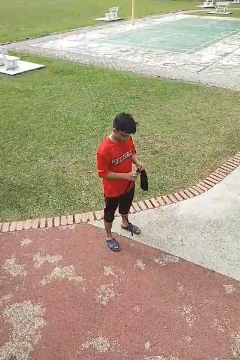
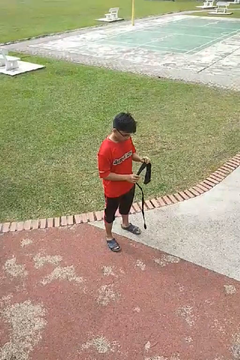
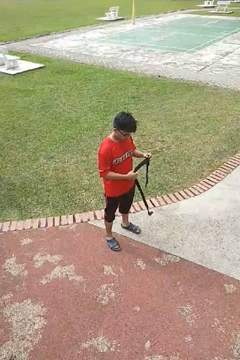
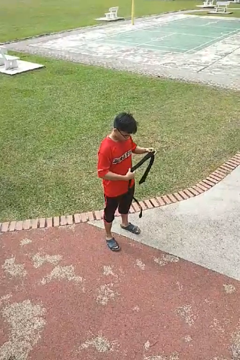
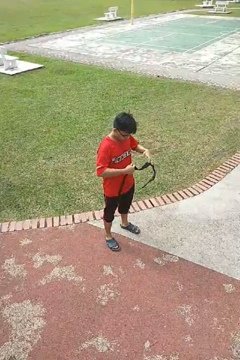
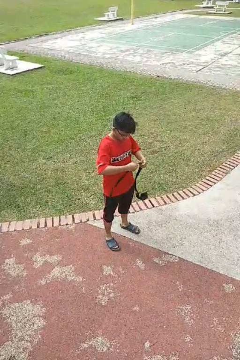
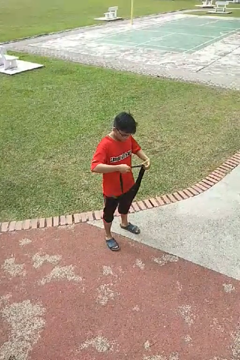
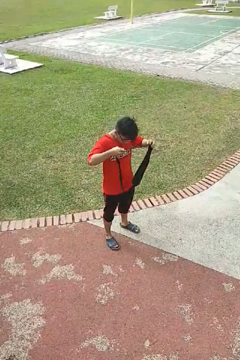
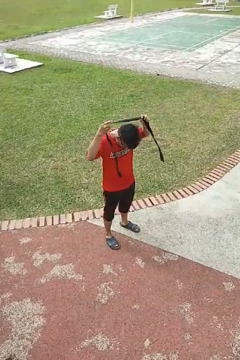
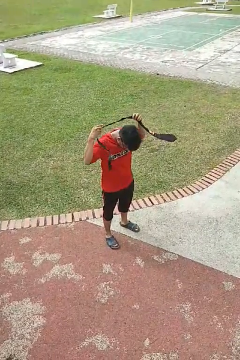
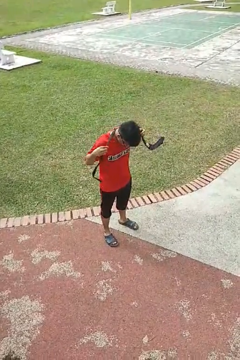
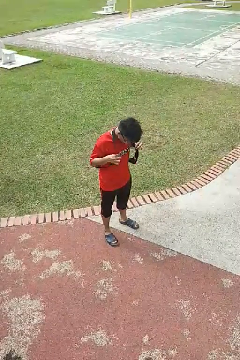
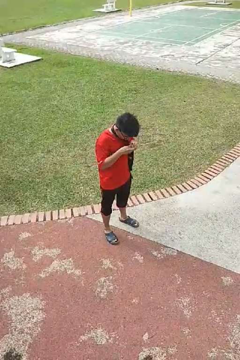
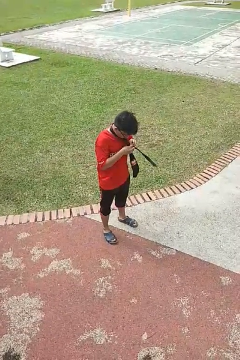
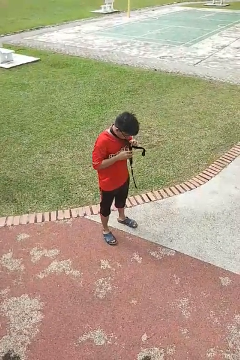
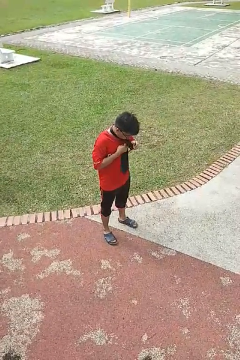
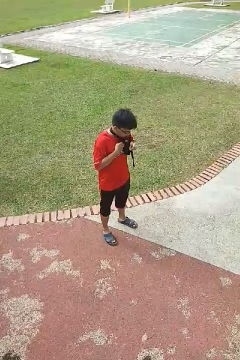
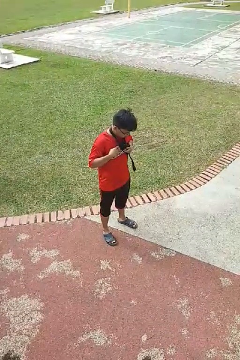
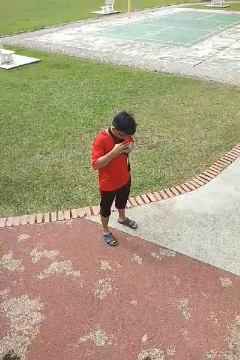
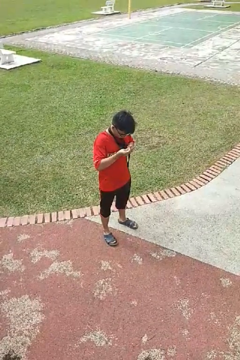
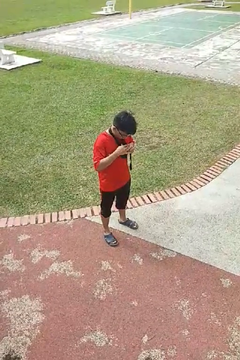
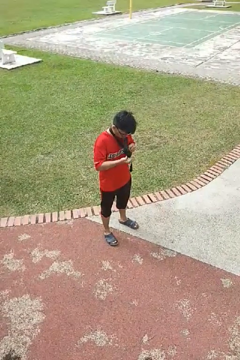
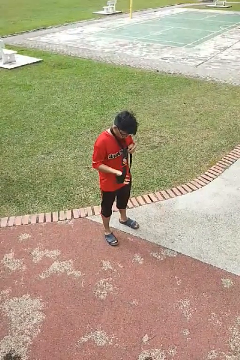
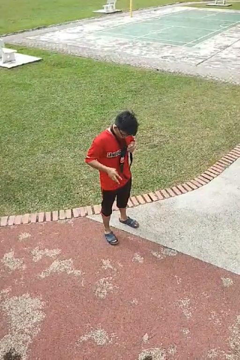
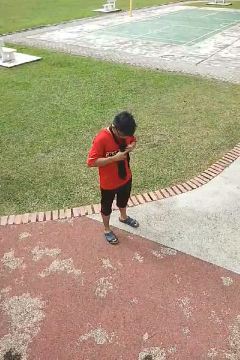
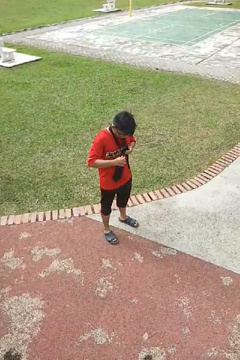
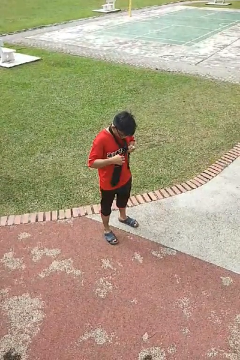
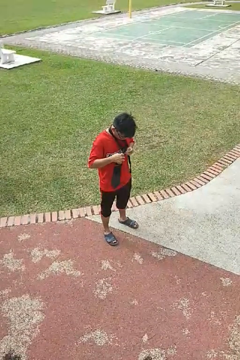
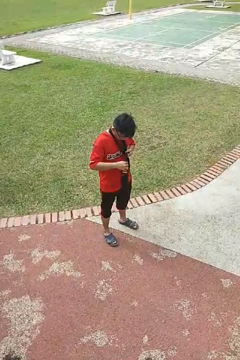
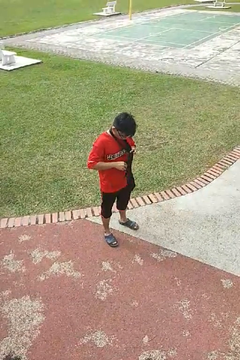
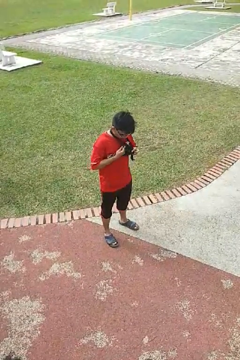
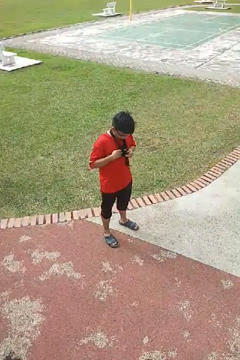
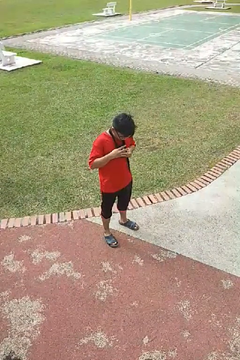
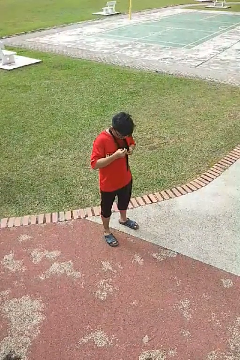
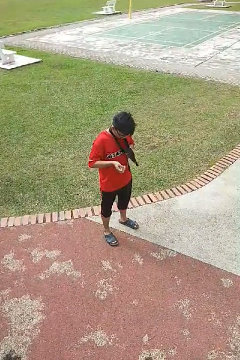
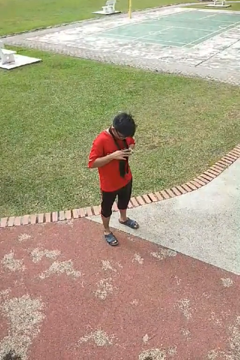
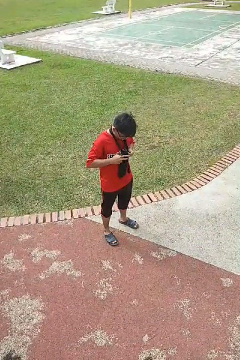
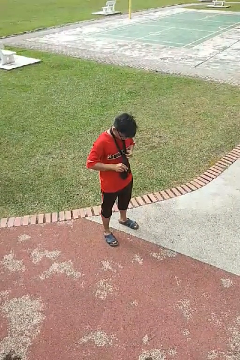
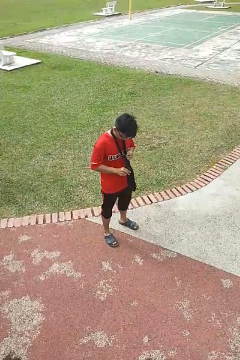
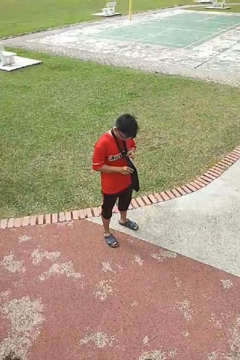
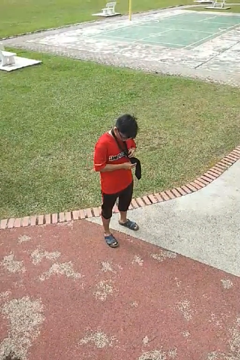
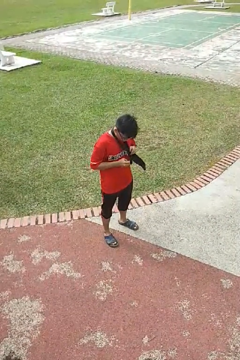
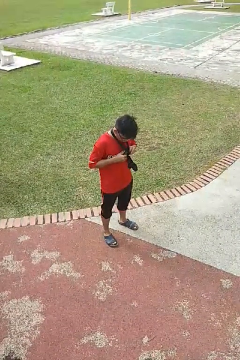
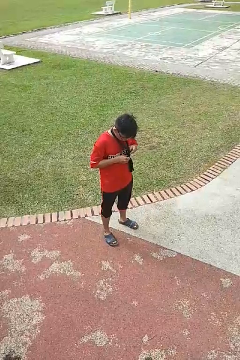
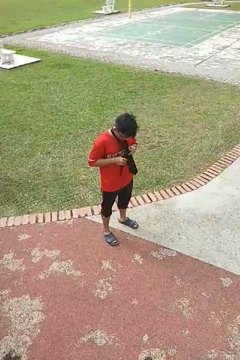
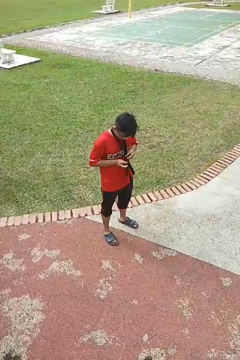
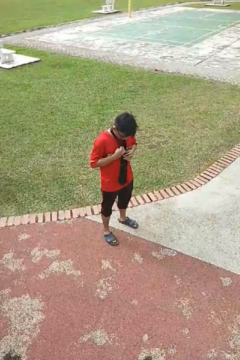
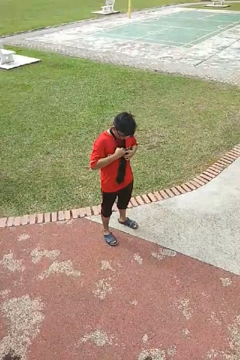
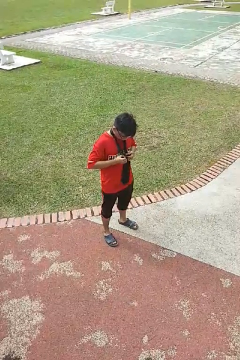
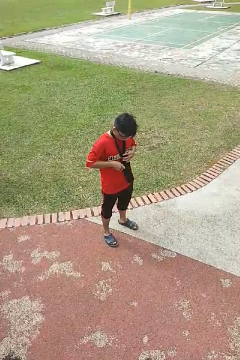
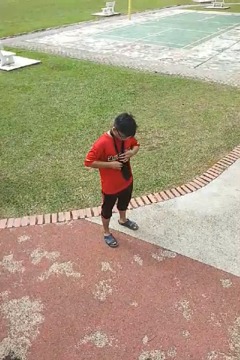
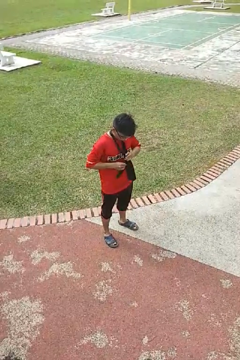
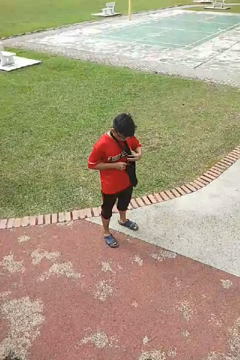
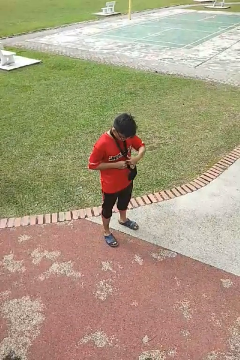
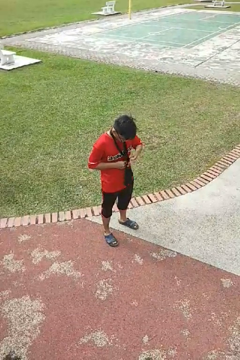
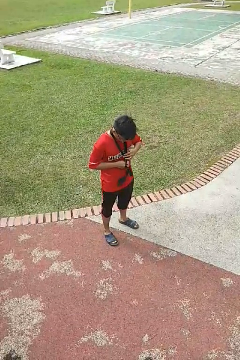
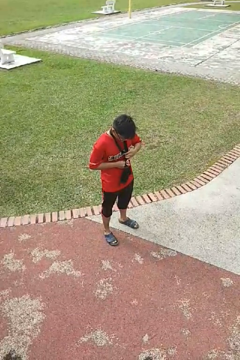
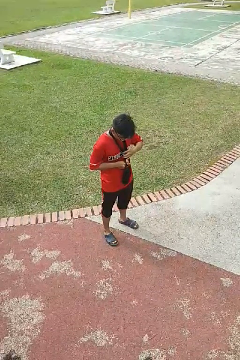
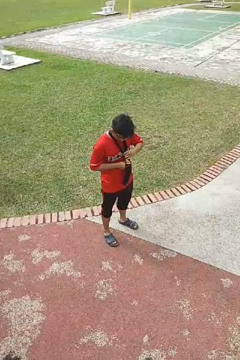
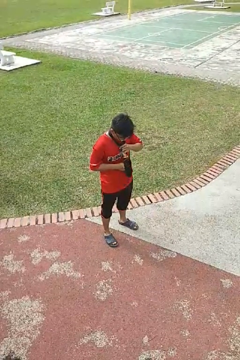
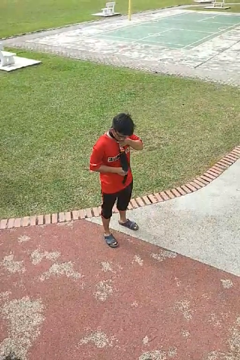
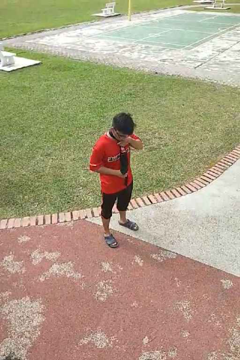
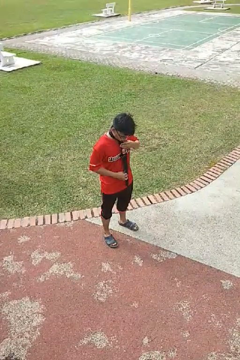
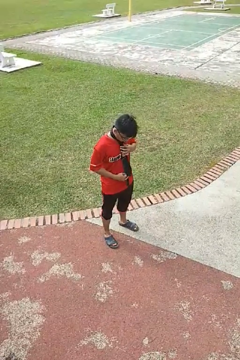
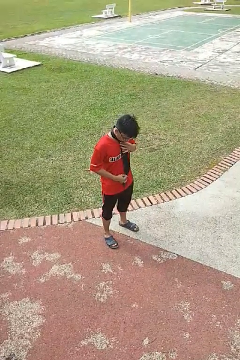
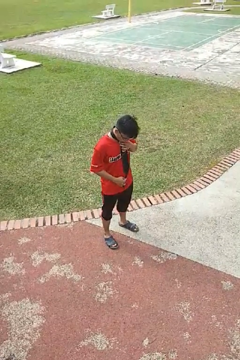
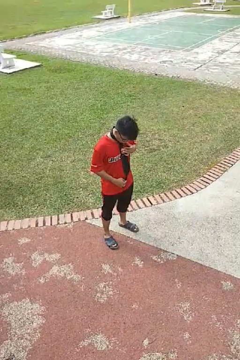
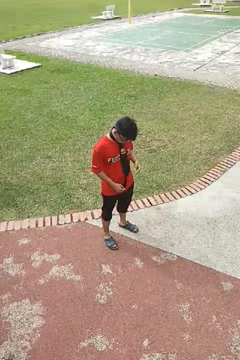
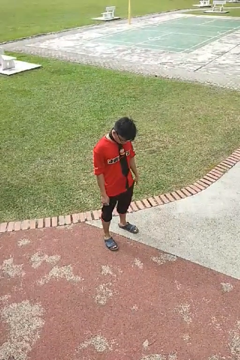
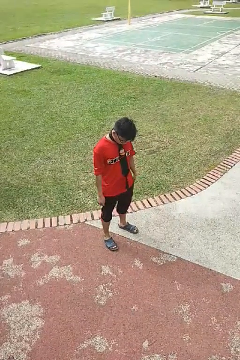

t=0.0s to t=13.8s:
person puts on necktie

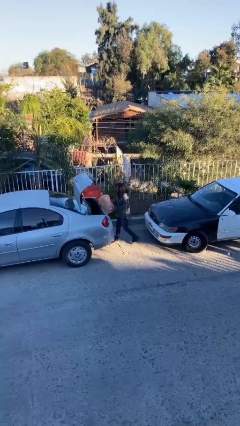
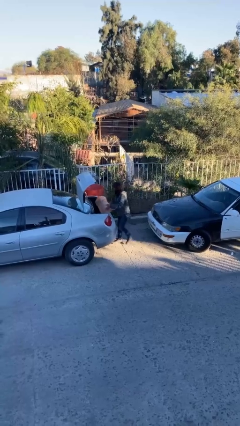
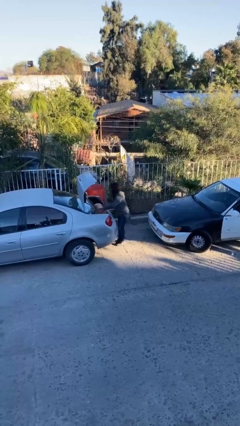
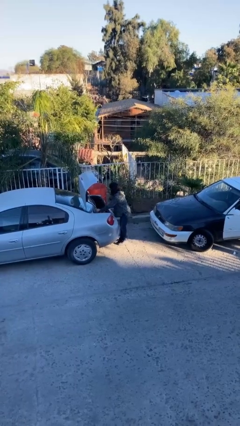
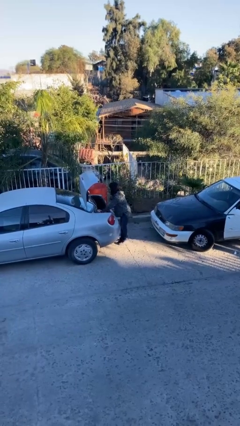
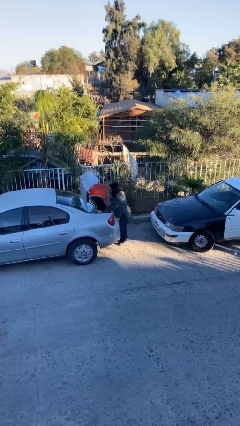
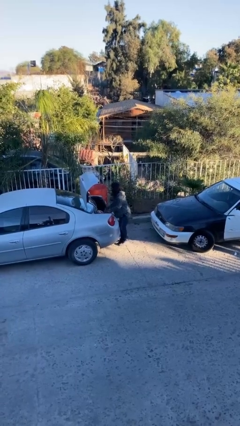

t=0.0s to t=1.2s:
person loads car

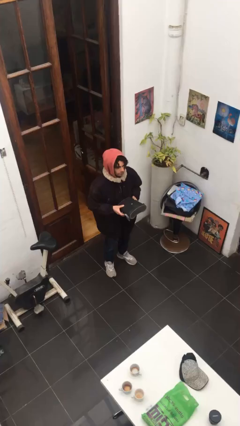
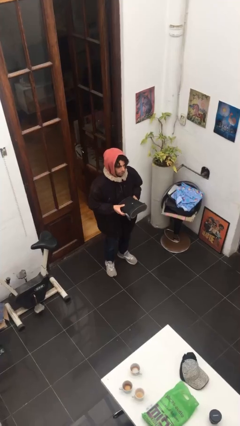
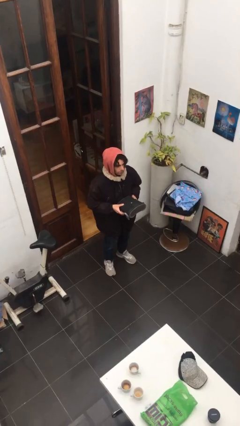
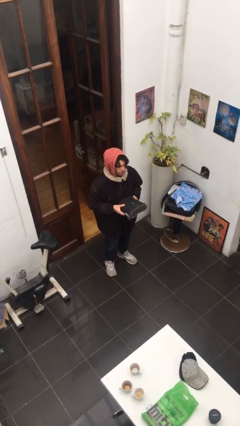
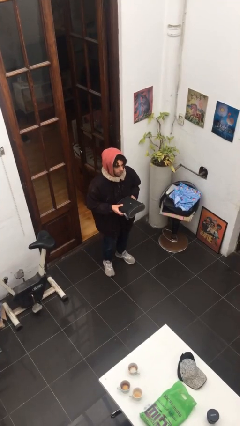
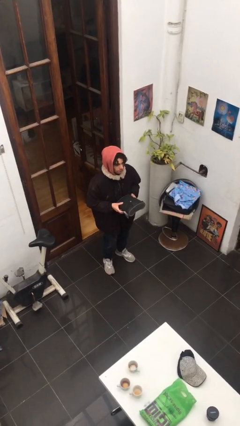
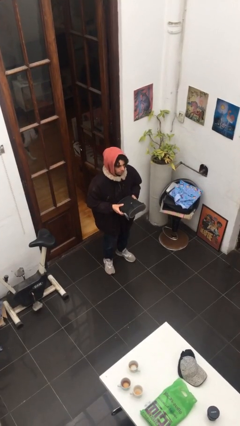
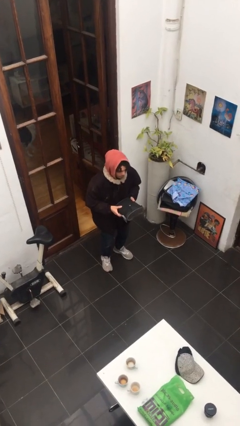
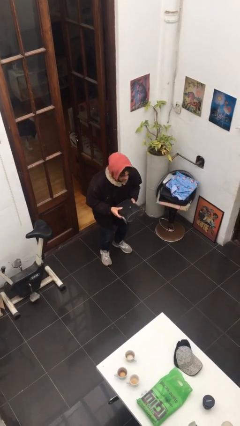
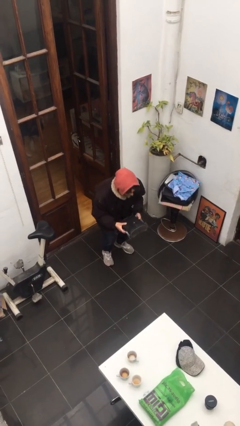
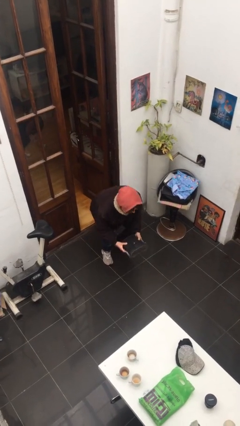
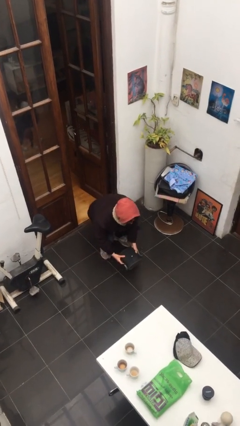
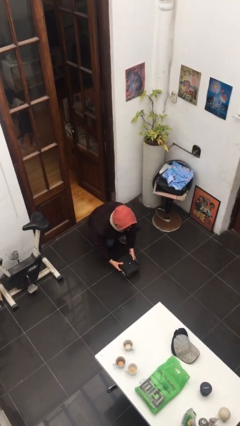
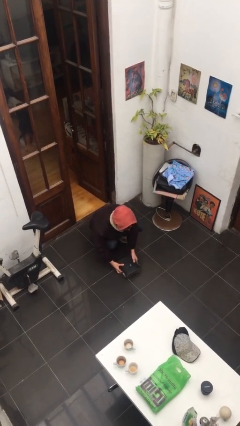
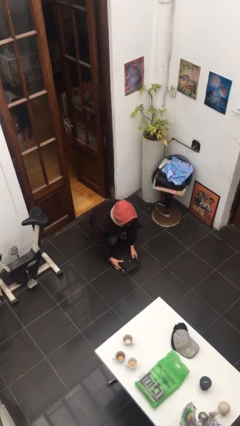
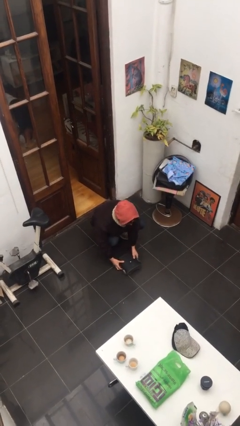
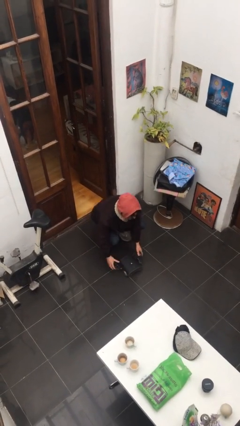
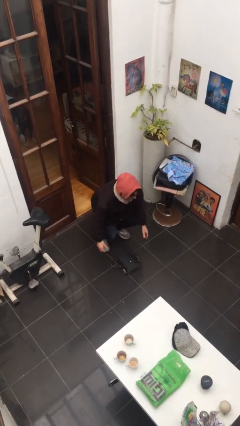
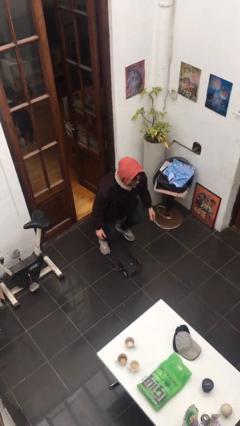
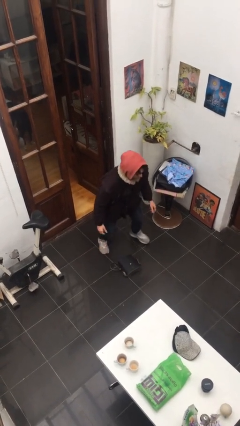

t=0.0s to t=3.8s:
person puts down object on floor

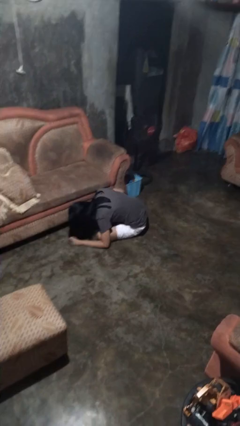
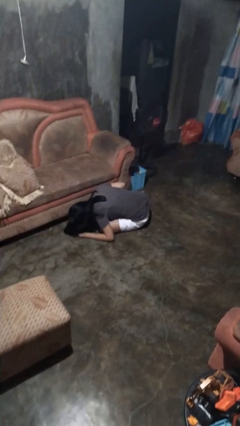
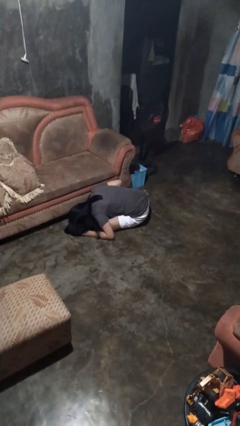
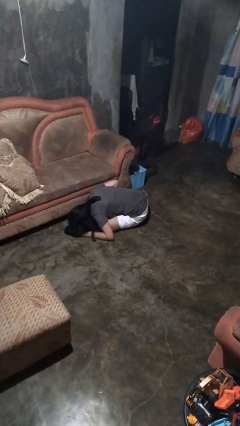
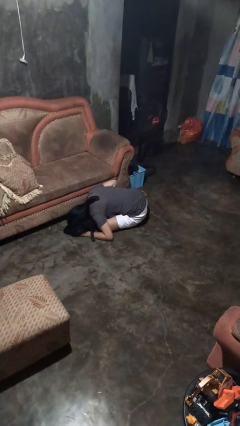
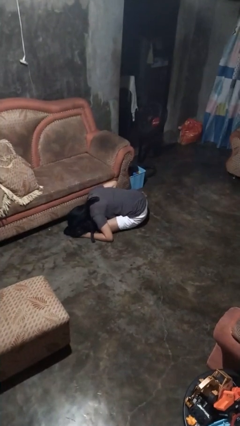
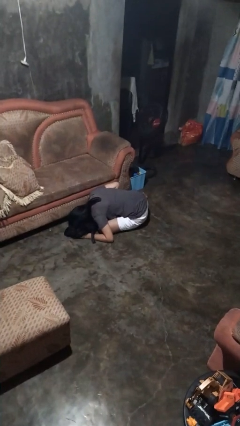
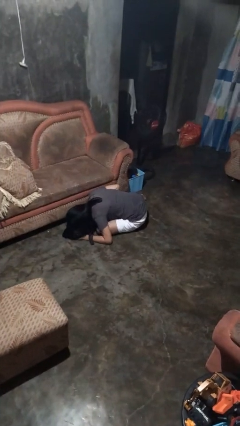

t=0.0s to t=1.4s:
person searches under couch
